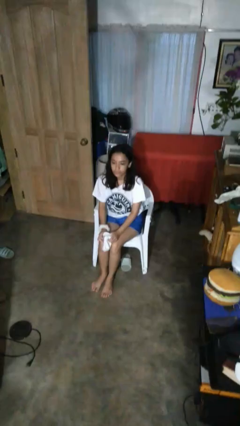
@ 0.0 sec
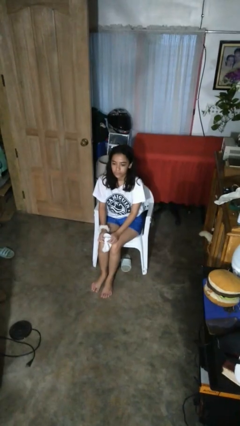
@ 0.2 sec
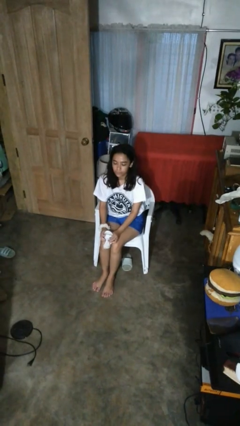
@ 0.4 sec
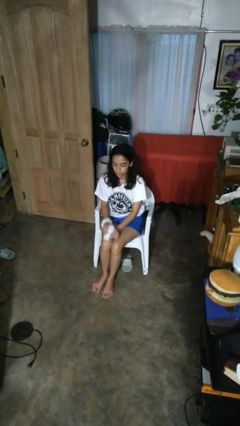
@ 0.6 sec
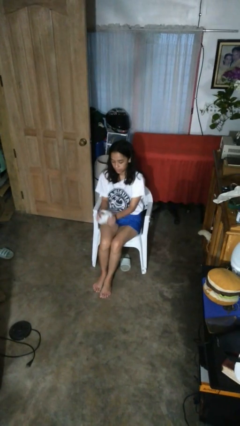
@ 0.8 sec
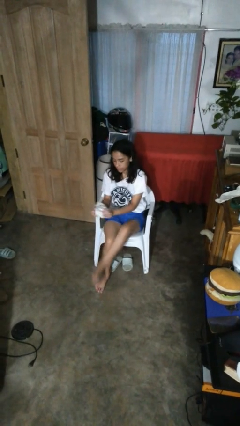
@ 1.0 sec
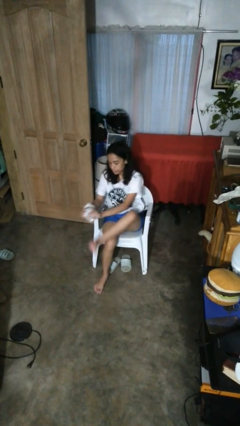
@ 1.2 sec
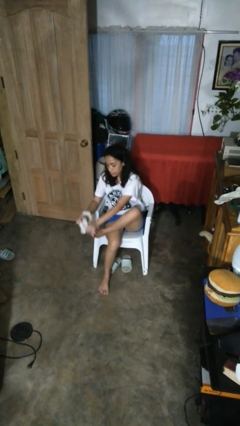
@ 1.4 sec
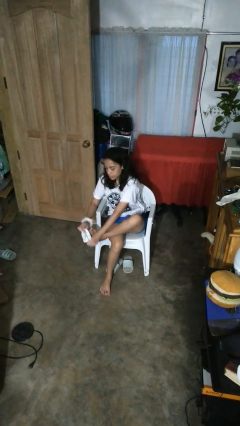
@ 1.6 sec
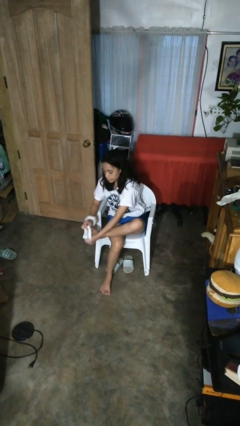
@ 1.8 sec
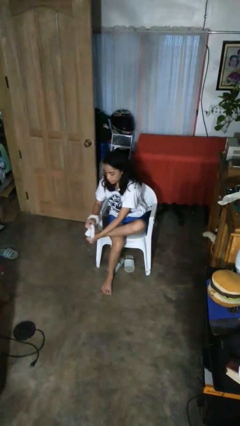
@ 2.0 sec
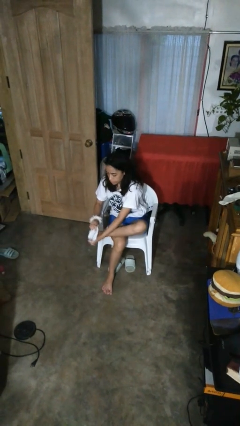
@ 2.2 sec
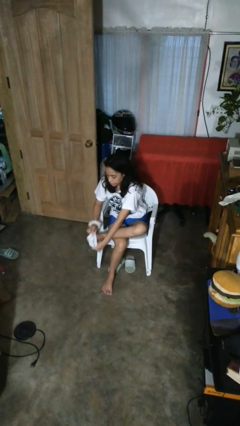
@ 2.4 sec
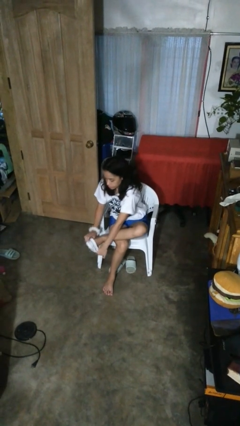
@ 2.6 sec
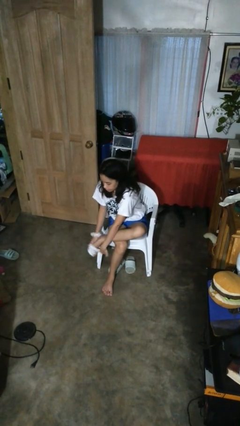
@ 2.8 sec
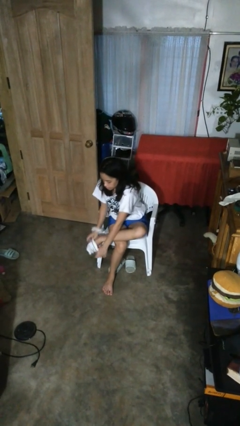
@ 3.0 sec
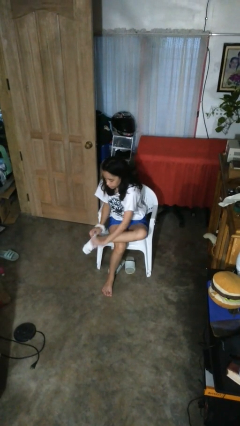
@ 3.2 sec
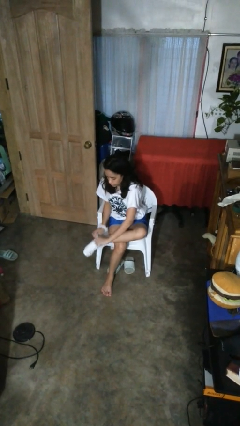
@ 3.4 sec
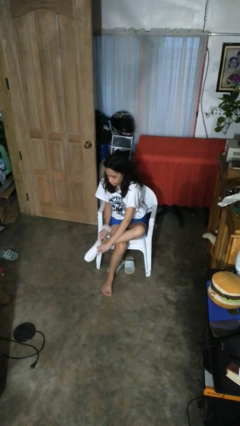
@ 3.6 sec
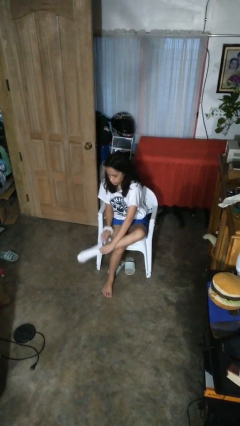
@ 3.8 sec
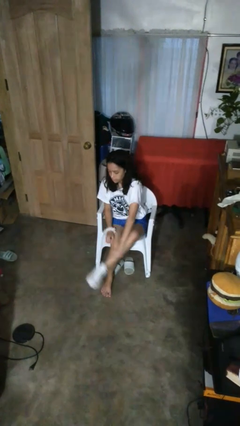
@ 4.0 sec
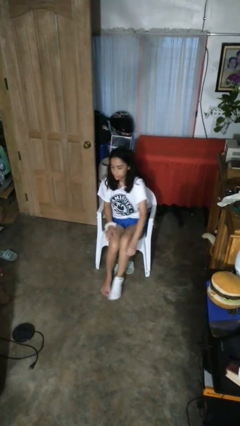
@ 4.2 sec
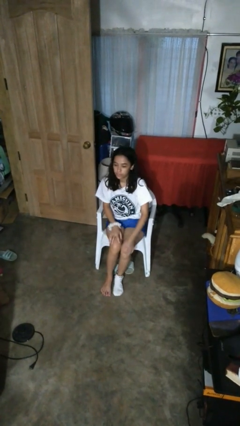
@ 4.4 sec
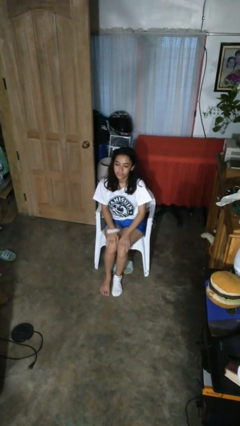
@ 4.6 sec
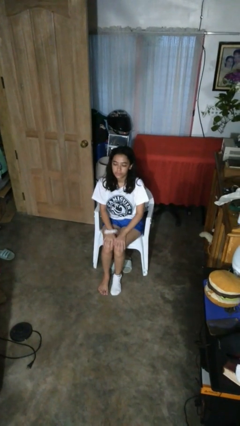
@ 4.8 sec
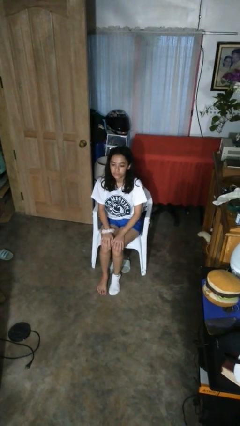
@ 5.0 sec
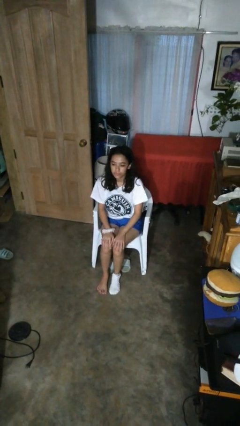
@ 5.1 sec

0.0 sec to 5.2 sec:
person puts on socks

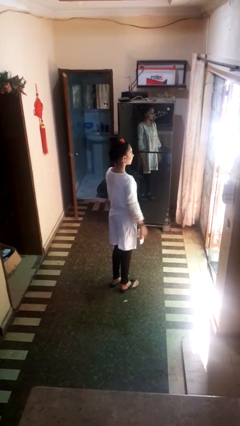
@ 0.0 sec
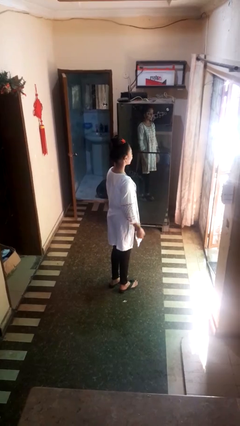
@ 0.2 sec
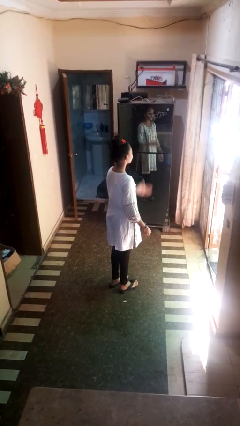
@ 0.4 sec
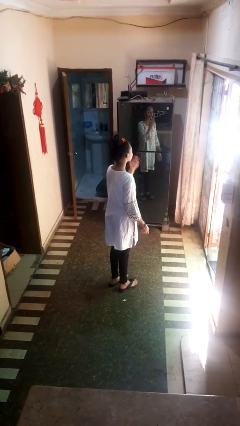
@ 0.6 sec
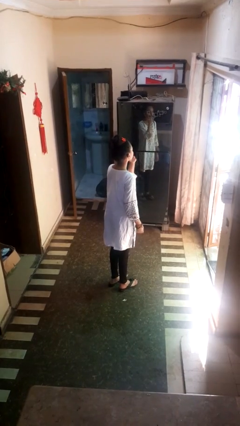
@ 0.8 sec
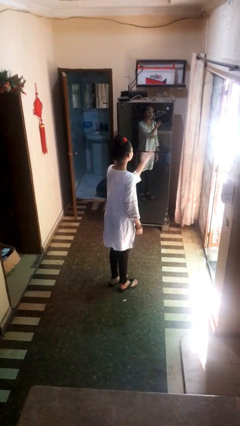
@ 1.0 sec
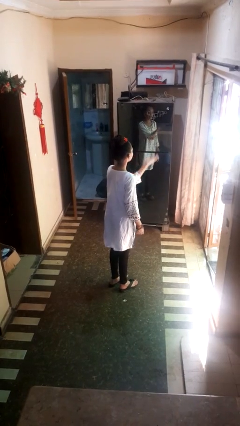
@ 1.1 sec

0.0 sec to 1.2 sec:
person gestures blow kiss

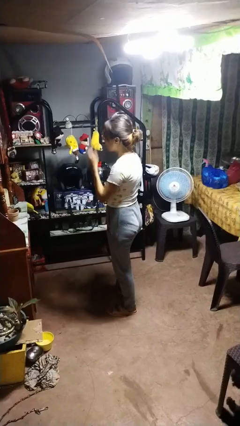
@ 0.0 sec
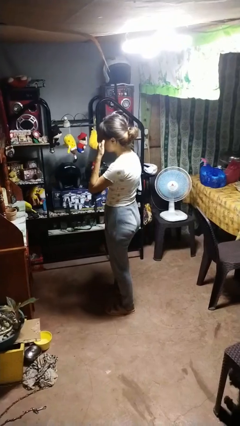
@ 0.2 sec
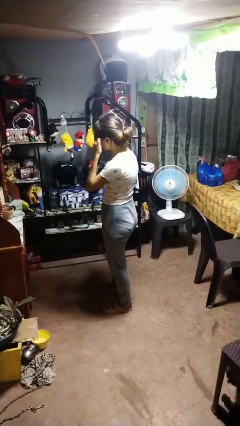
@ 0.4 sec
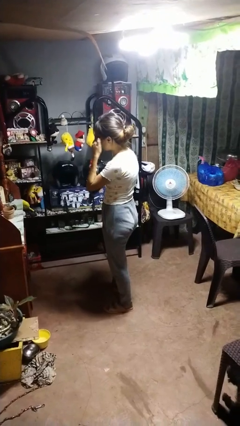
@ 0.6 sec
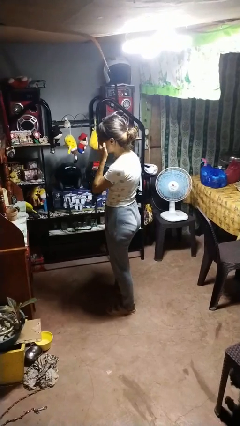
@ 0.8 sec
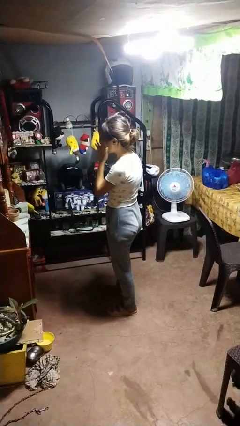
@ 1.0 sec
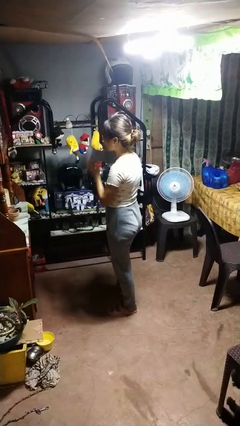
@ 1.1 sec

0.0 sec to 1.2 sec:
person rubs eyes

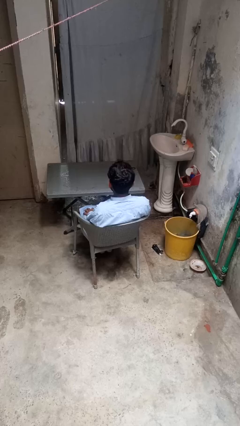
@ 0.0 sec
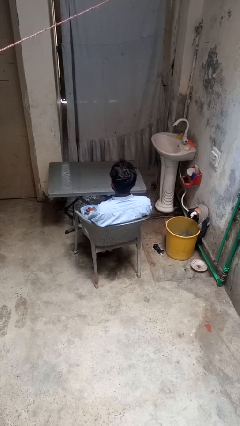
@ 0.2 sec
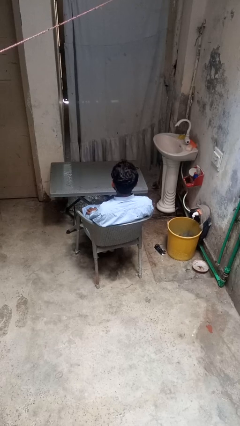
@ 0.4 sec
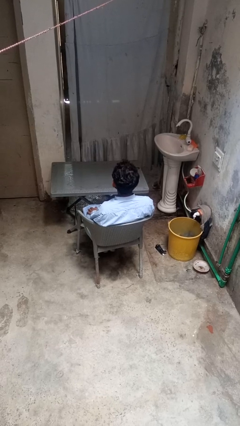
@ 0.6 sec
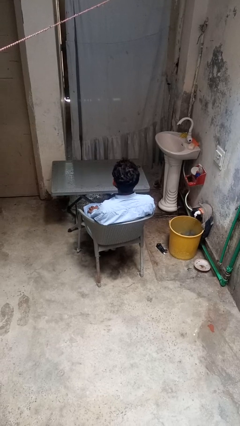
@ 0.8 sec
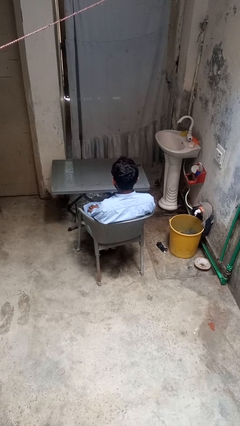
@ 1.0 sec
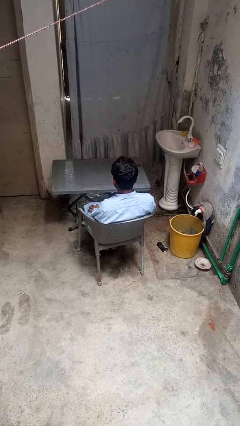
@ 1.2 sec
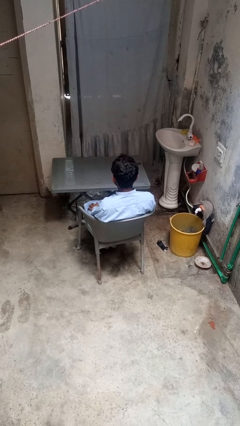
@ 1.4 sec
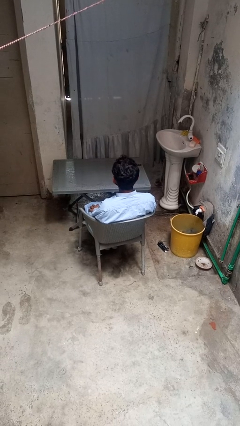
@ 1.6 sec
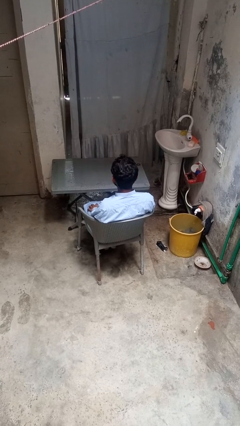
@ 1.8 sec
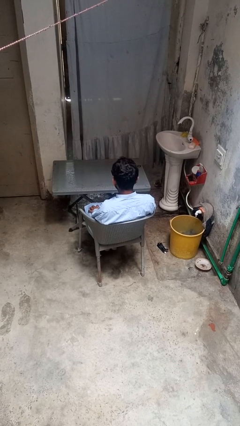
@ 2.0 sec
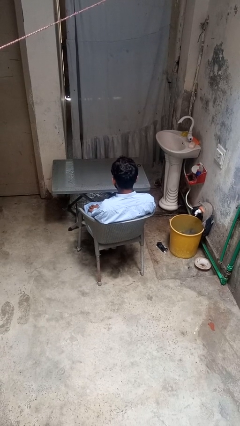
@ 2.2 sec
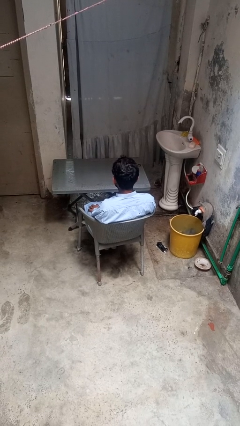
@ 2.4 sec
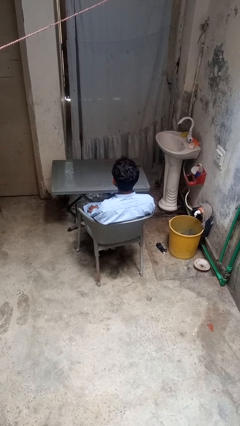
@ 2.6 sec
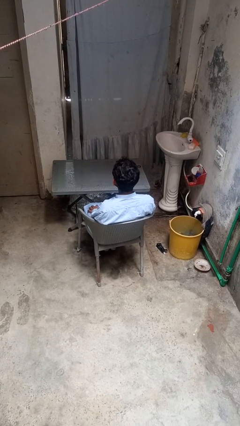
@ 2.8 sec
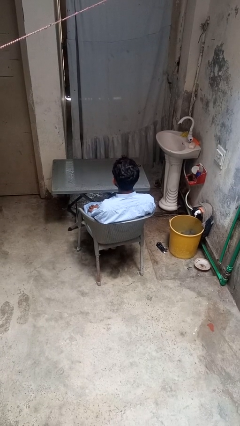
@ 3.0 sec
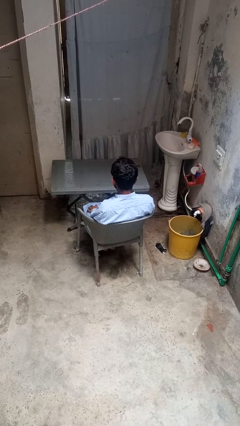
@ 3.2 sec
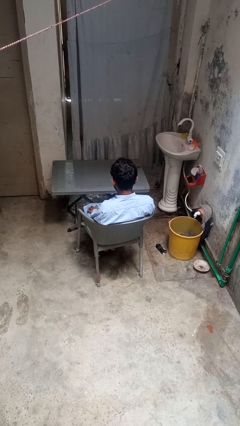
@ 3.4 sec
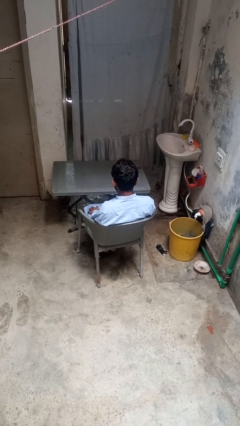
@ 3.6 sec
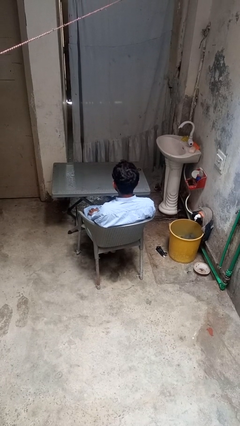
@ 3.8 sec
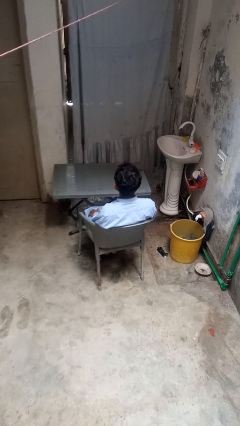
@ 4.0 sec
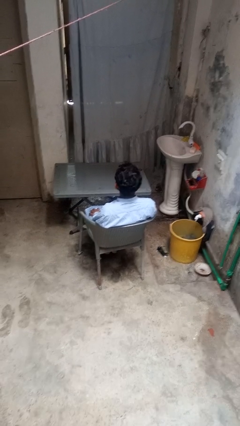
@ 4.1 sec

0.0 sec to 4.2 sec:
person nods head

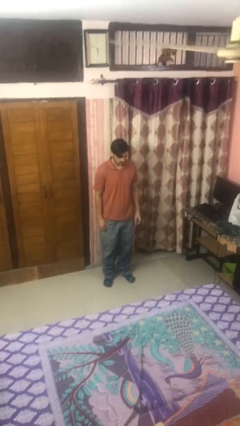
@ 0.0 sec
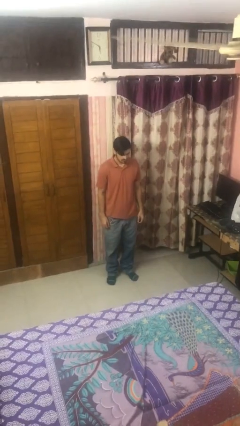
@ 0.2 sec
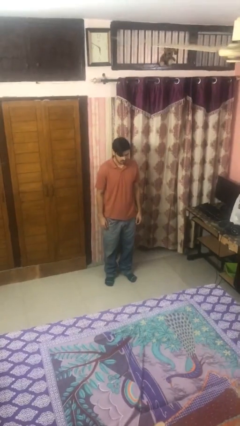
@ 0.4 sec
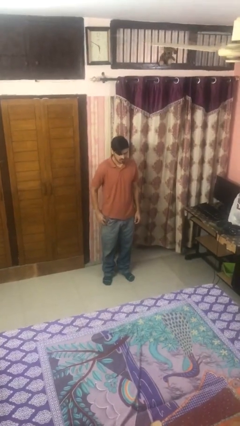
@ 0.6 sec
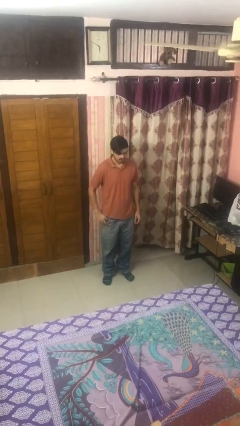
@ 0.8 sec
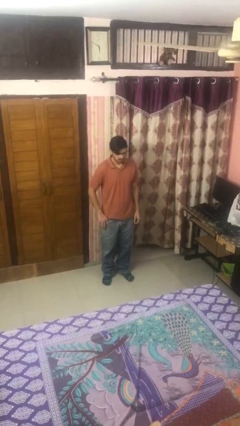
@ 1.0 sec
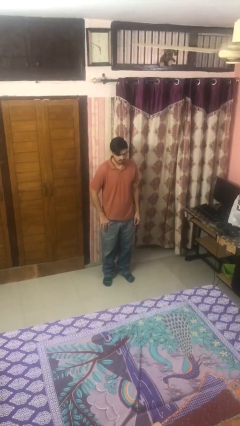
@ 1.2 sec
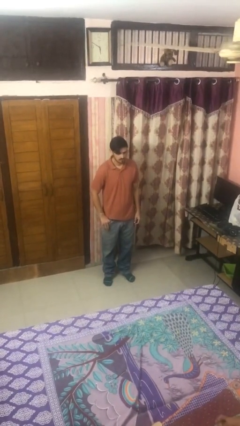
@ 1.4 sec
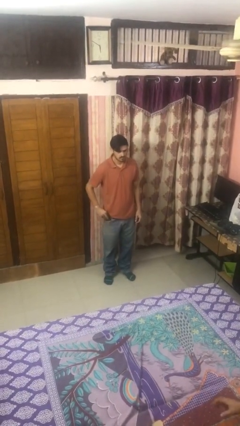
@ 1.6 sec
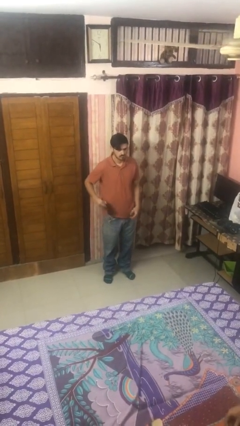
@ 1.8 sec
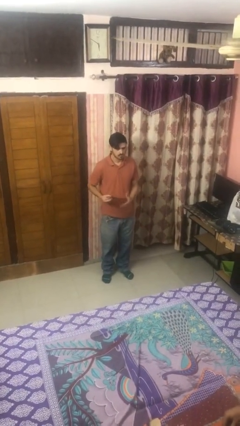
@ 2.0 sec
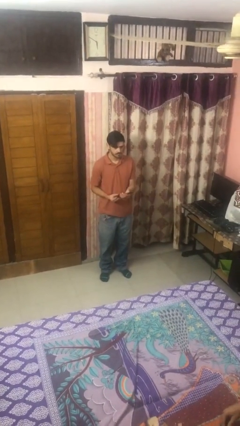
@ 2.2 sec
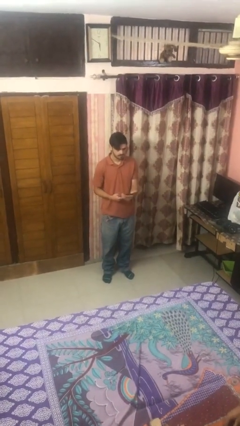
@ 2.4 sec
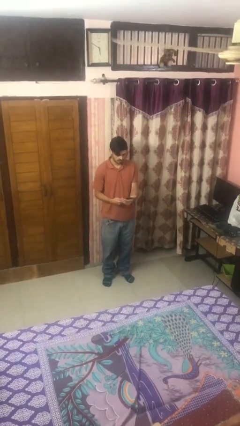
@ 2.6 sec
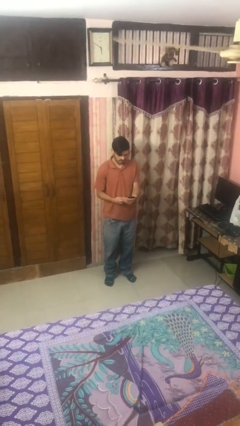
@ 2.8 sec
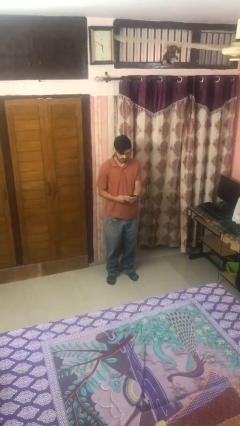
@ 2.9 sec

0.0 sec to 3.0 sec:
person takes phone from pocket

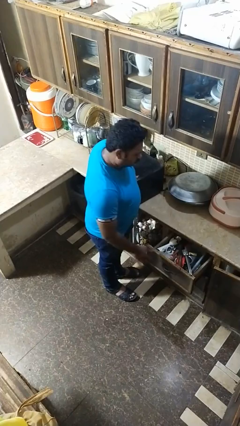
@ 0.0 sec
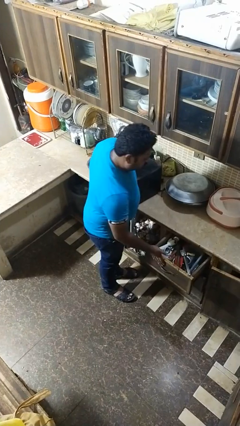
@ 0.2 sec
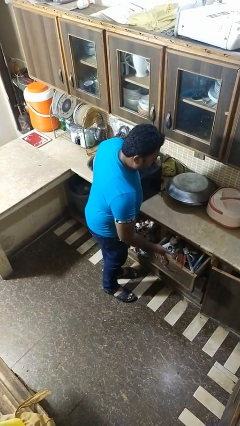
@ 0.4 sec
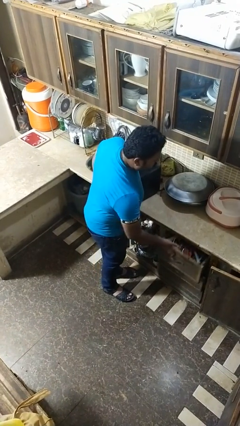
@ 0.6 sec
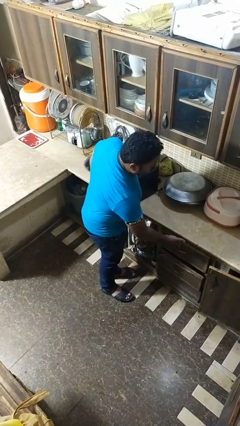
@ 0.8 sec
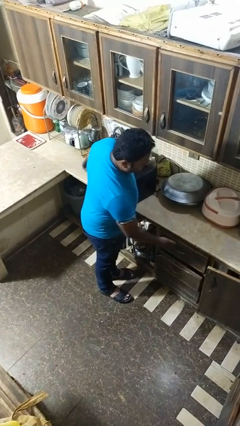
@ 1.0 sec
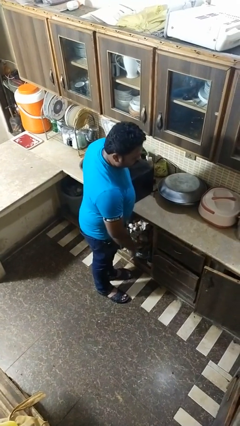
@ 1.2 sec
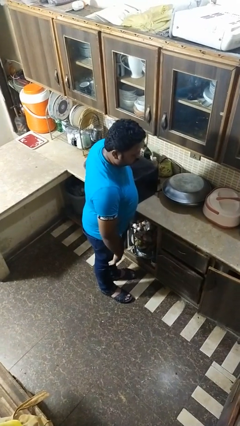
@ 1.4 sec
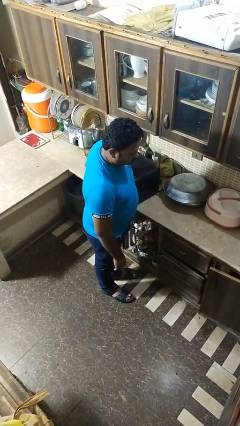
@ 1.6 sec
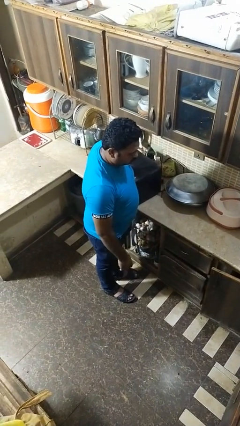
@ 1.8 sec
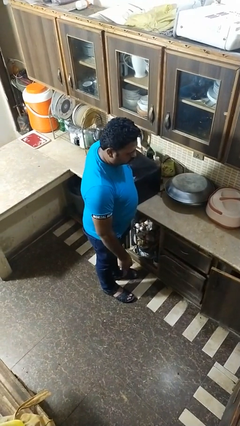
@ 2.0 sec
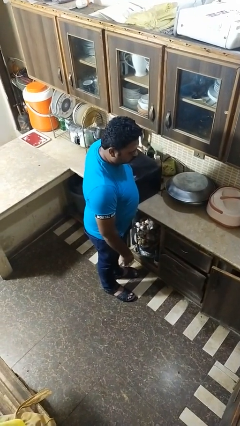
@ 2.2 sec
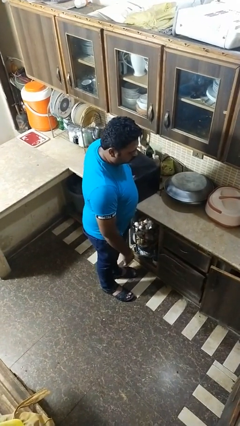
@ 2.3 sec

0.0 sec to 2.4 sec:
person closes dresser drawer
